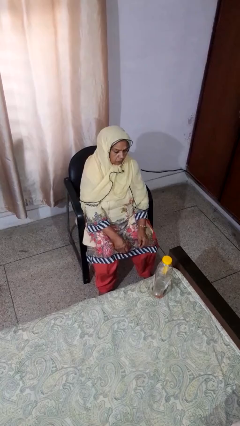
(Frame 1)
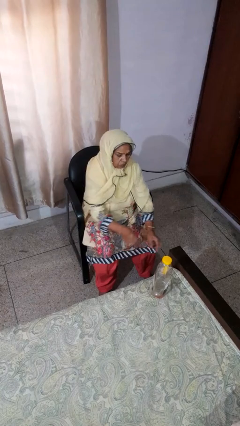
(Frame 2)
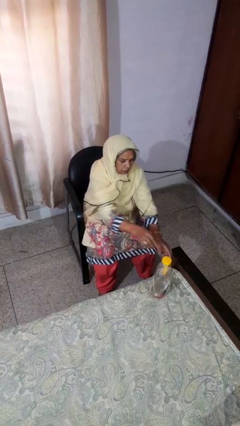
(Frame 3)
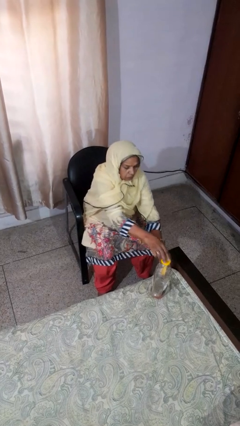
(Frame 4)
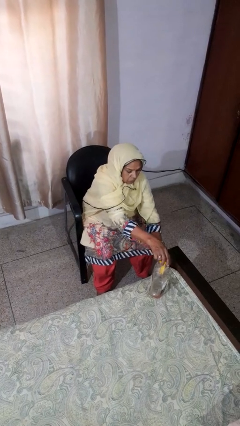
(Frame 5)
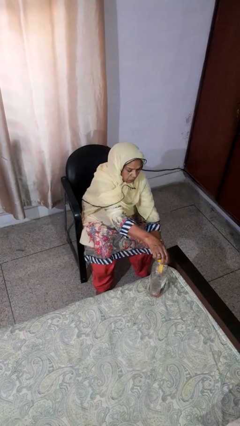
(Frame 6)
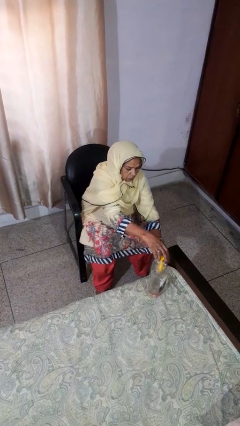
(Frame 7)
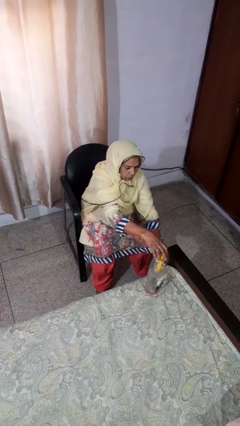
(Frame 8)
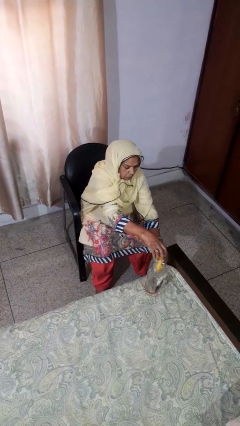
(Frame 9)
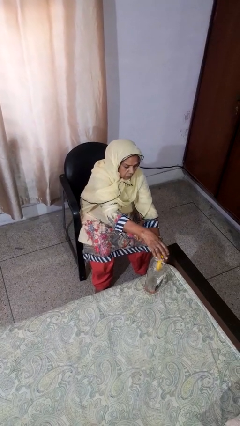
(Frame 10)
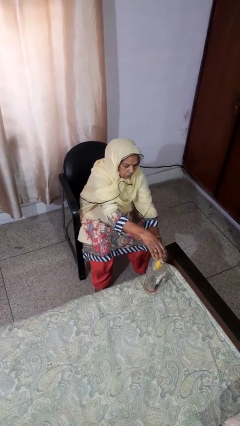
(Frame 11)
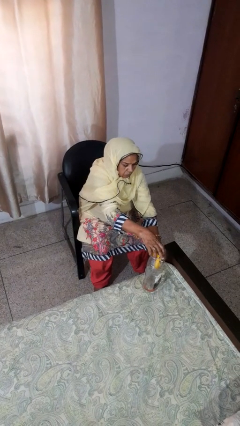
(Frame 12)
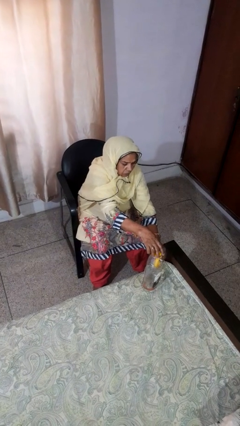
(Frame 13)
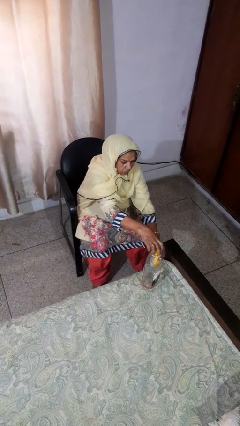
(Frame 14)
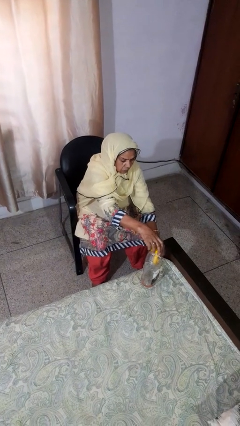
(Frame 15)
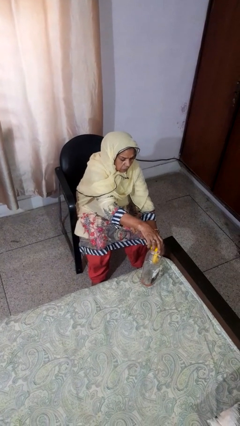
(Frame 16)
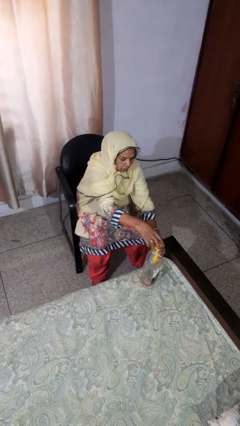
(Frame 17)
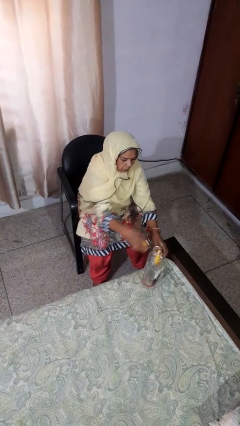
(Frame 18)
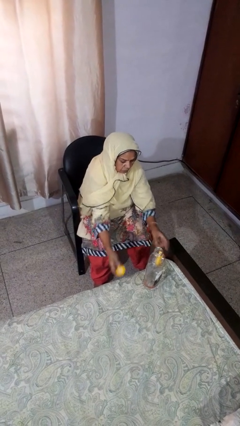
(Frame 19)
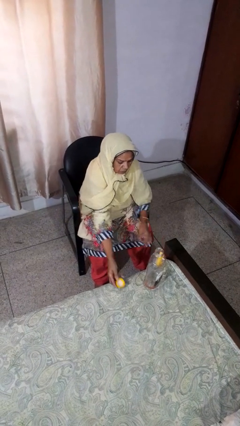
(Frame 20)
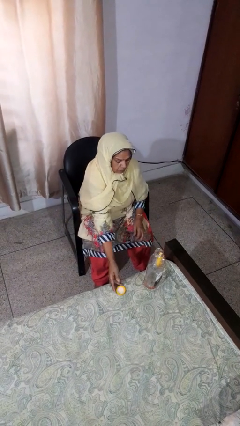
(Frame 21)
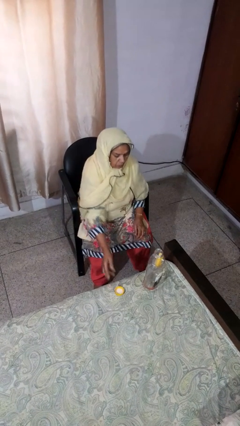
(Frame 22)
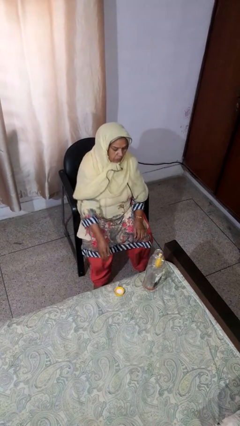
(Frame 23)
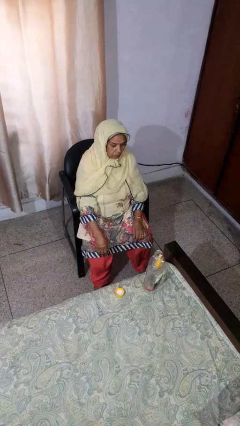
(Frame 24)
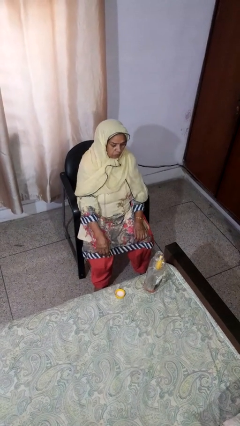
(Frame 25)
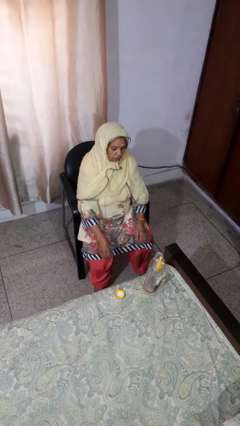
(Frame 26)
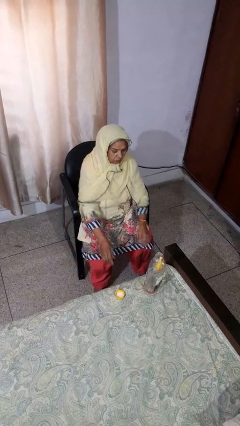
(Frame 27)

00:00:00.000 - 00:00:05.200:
person unscrews lid from bottle

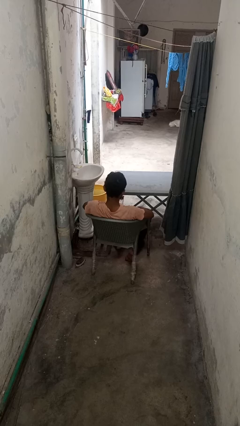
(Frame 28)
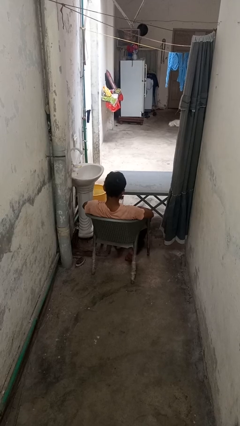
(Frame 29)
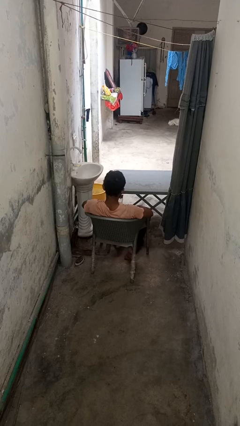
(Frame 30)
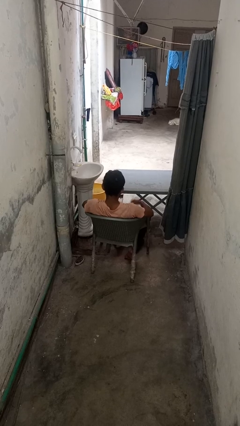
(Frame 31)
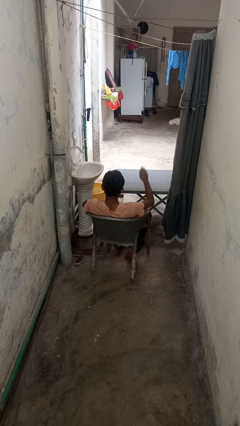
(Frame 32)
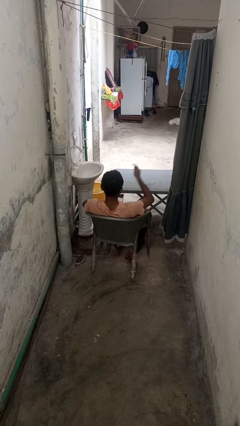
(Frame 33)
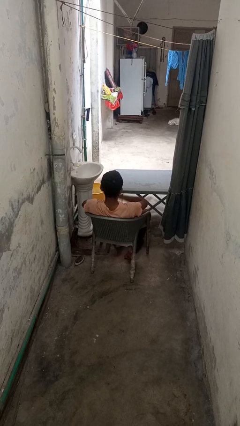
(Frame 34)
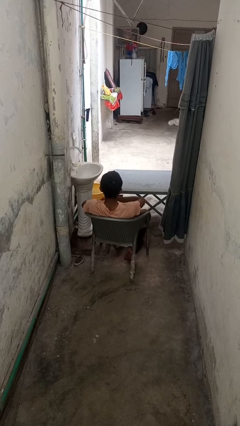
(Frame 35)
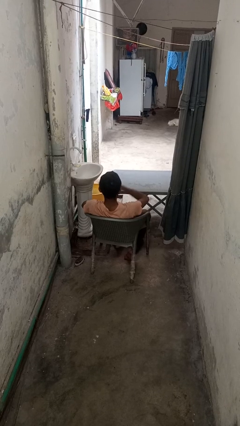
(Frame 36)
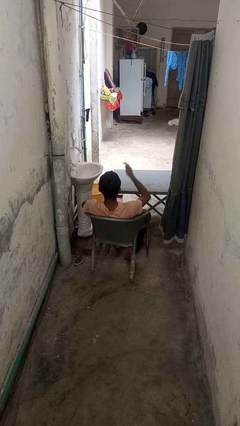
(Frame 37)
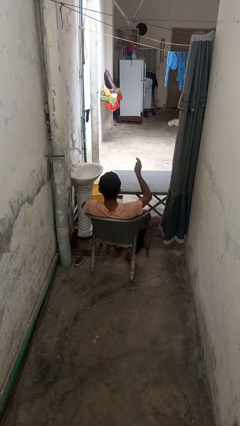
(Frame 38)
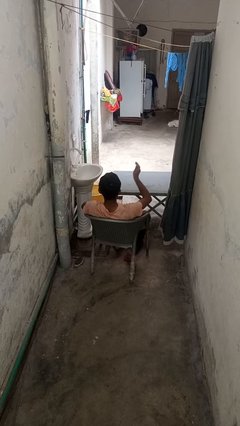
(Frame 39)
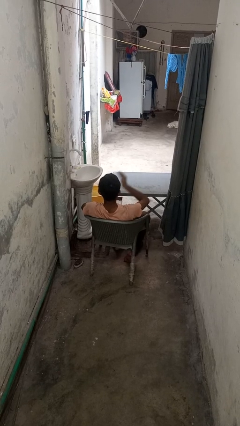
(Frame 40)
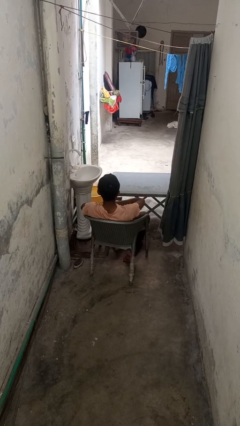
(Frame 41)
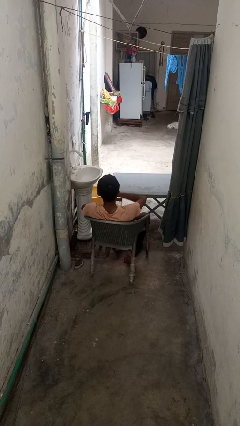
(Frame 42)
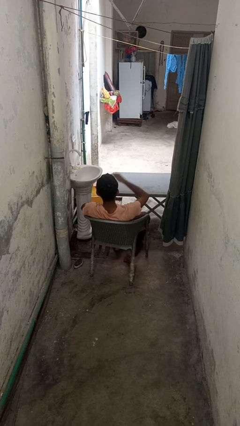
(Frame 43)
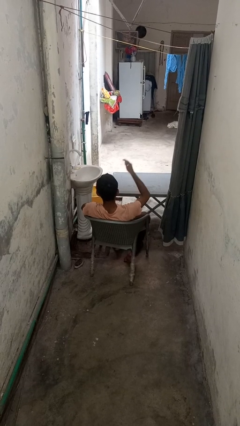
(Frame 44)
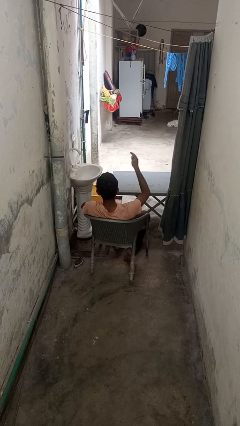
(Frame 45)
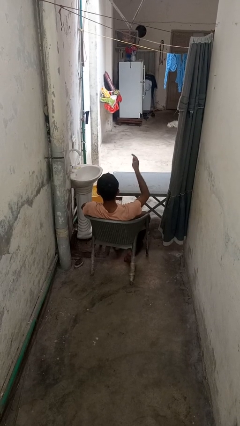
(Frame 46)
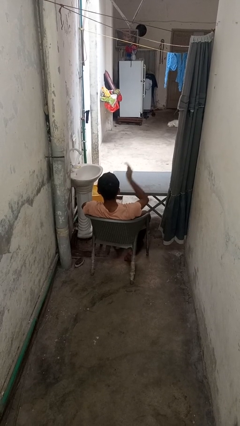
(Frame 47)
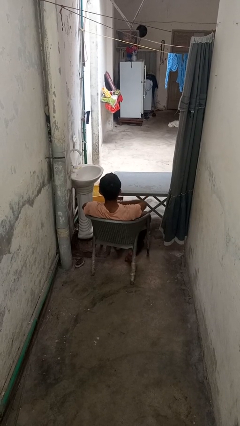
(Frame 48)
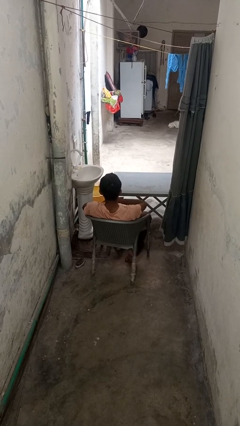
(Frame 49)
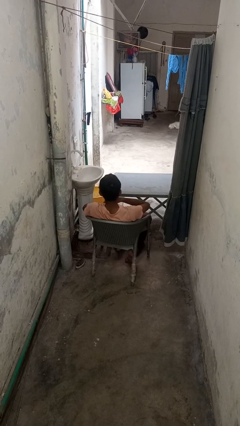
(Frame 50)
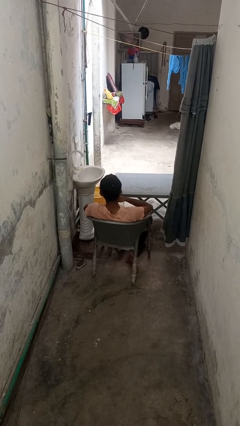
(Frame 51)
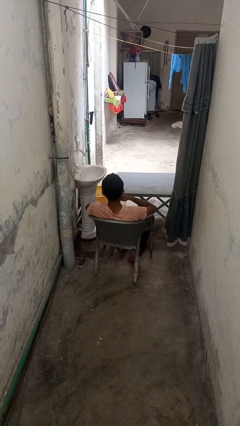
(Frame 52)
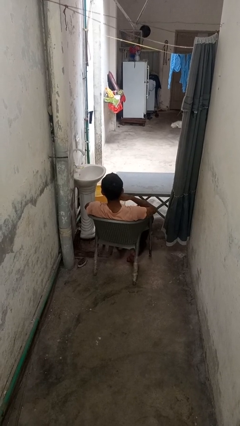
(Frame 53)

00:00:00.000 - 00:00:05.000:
person drums on chest

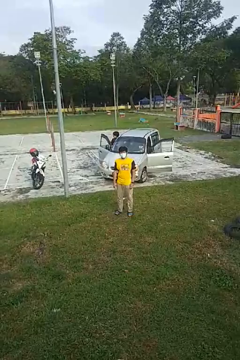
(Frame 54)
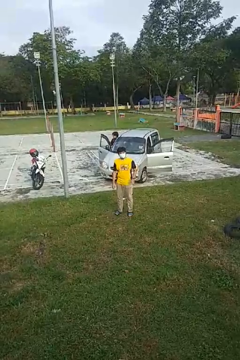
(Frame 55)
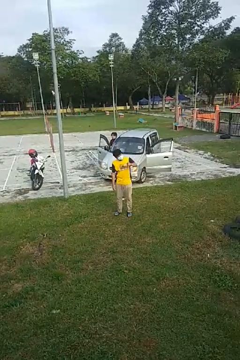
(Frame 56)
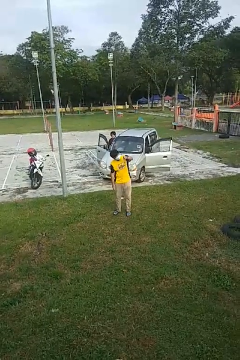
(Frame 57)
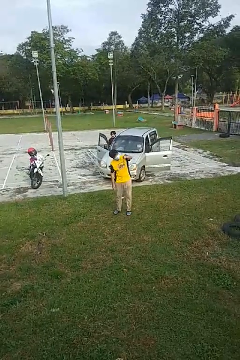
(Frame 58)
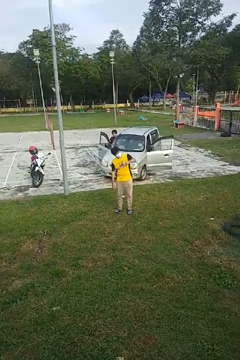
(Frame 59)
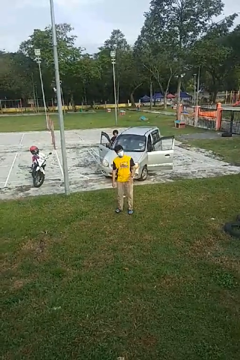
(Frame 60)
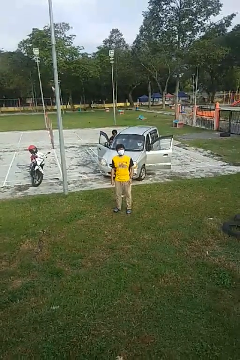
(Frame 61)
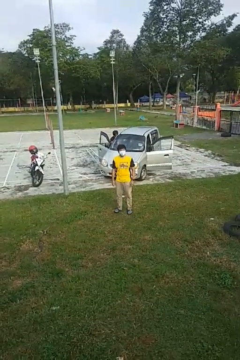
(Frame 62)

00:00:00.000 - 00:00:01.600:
person points at person

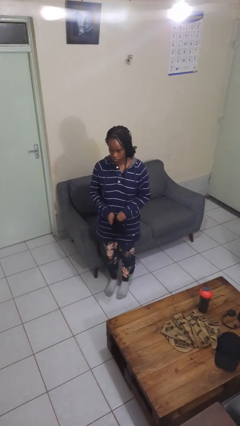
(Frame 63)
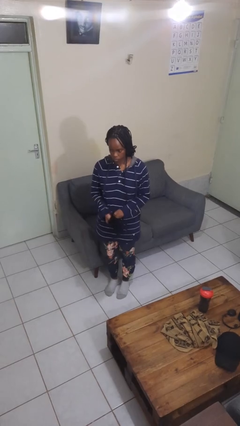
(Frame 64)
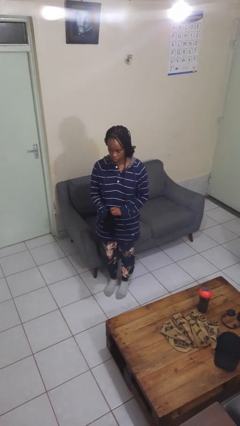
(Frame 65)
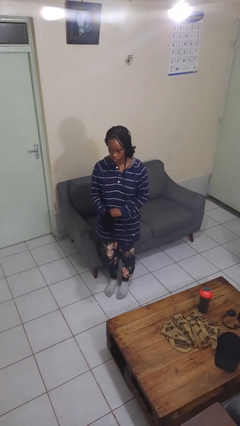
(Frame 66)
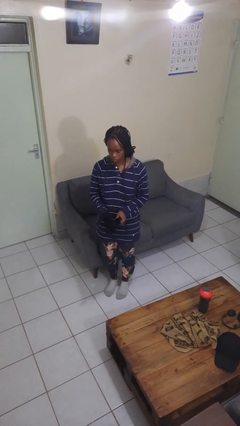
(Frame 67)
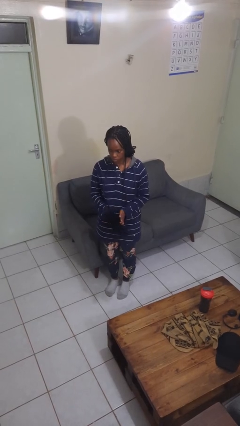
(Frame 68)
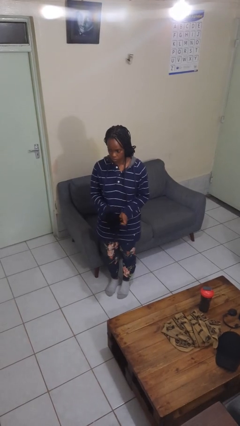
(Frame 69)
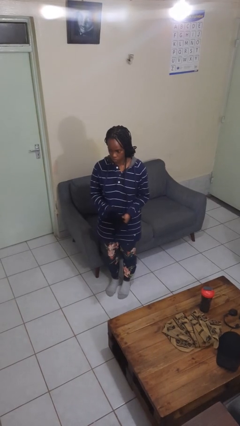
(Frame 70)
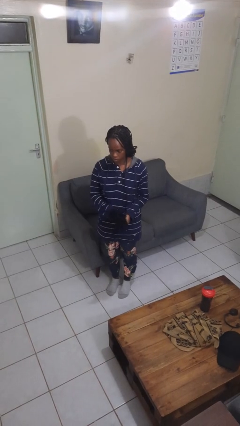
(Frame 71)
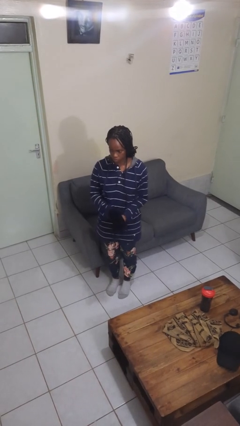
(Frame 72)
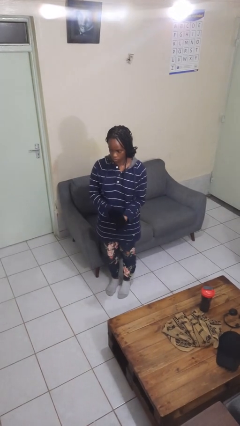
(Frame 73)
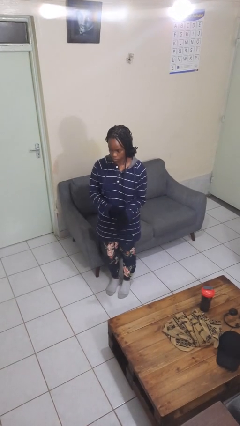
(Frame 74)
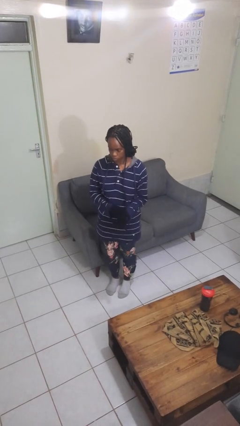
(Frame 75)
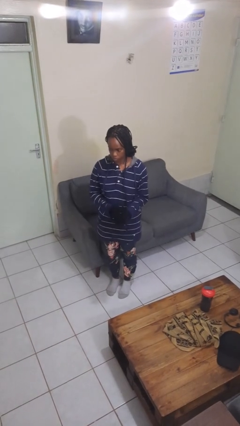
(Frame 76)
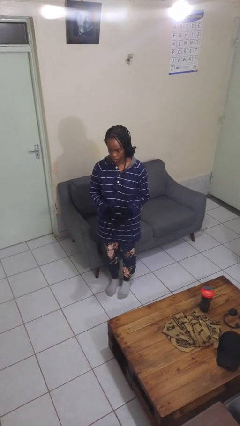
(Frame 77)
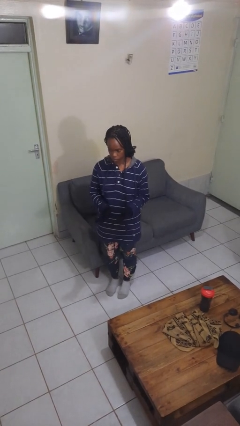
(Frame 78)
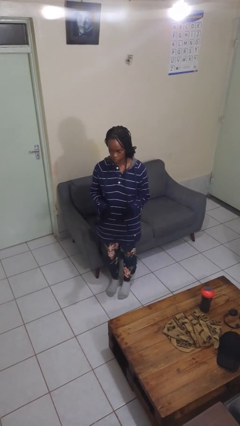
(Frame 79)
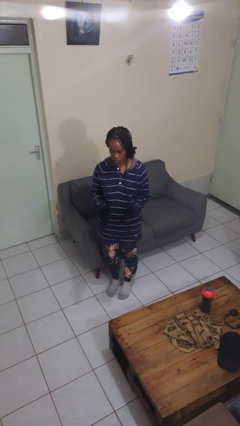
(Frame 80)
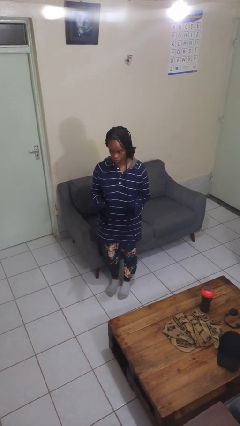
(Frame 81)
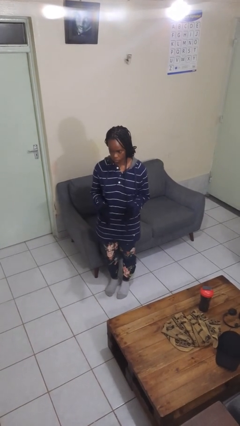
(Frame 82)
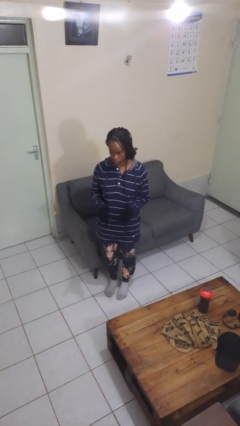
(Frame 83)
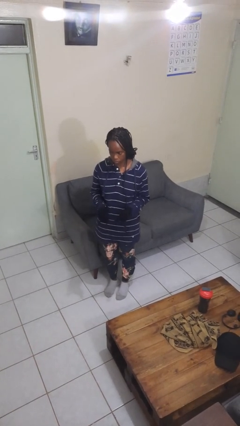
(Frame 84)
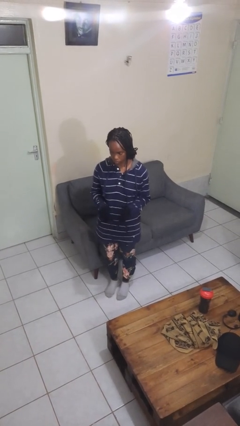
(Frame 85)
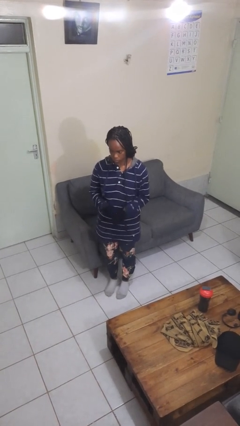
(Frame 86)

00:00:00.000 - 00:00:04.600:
person puts on gloves

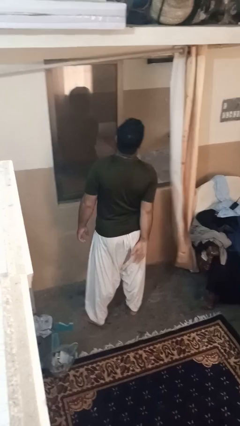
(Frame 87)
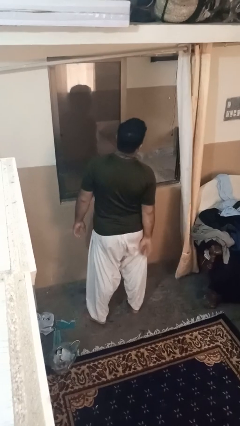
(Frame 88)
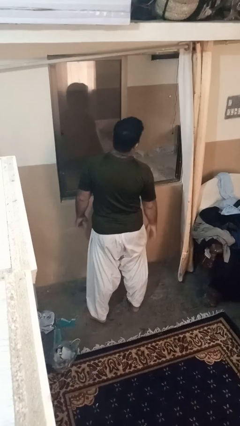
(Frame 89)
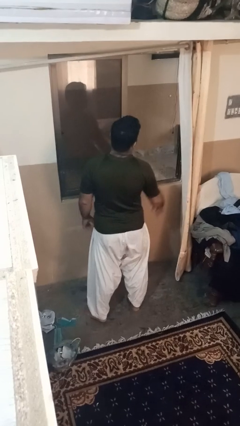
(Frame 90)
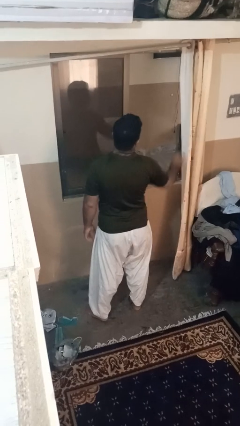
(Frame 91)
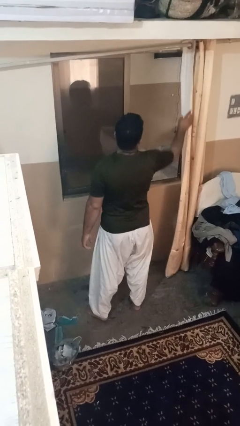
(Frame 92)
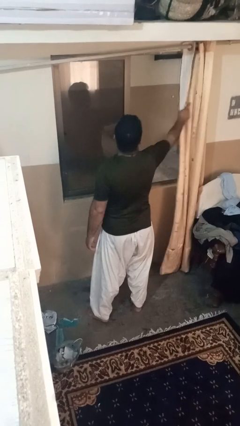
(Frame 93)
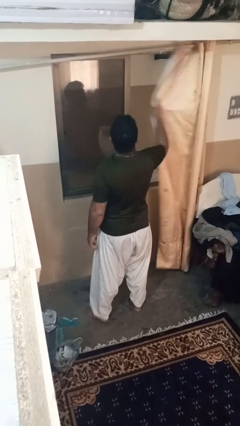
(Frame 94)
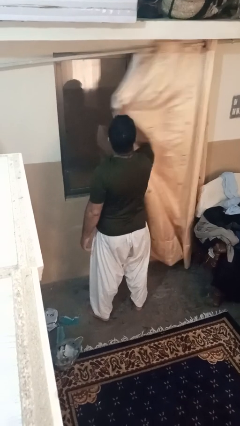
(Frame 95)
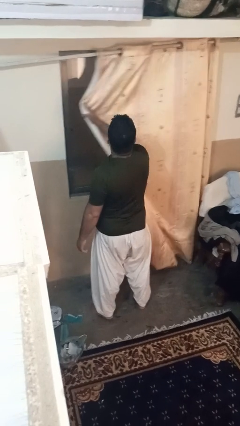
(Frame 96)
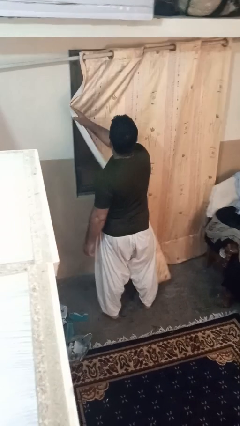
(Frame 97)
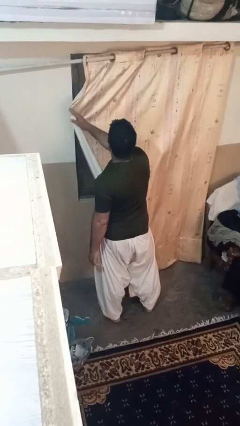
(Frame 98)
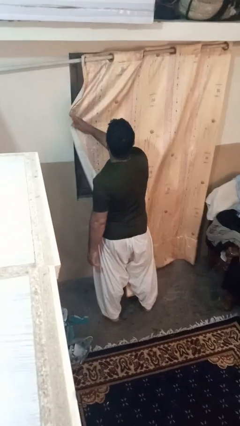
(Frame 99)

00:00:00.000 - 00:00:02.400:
person closes curtains
